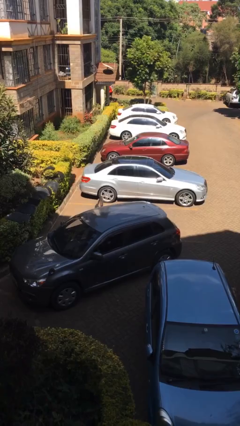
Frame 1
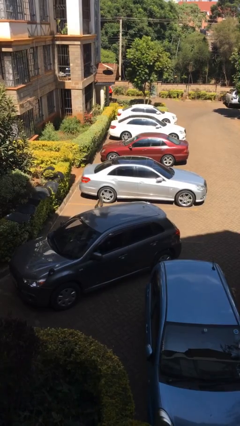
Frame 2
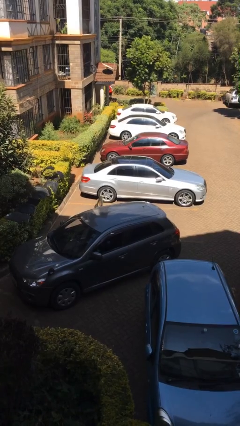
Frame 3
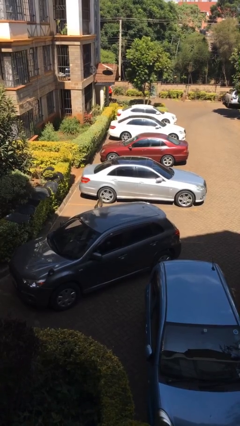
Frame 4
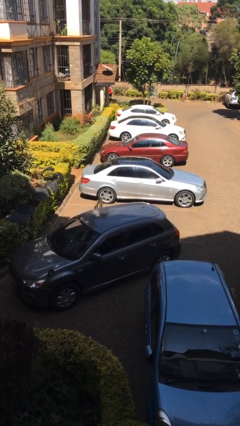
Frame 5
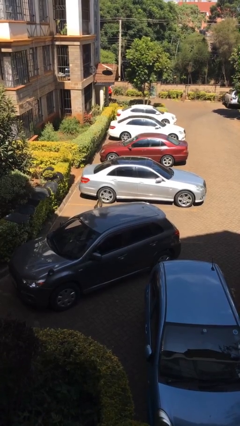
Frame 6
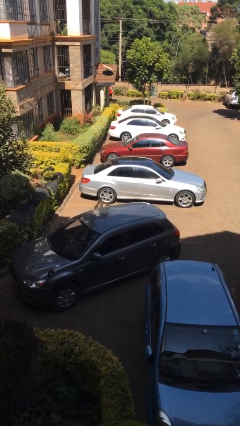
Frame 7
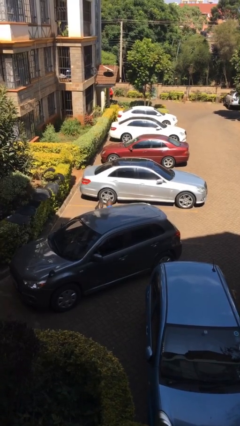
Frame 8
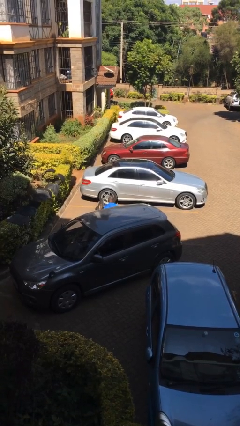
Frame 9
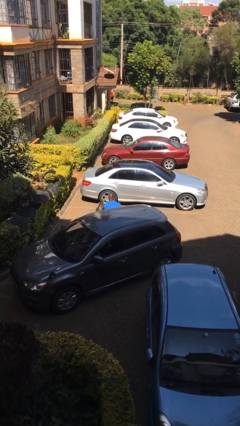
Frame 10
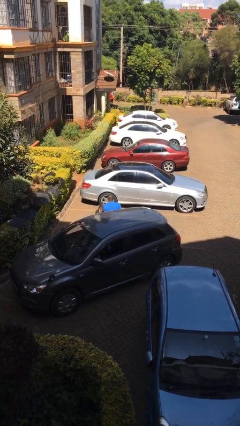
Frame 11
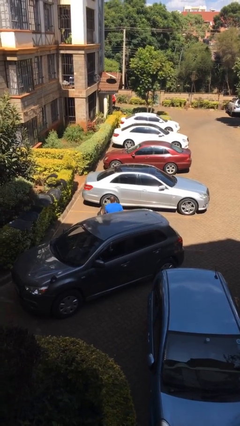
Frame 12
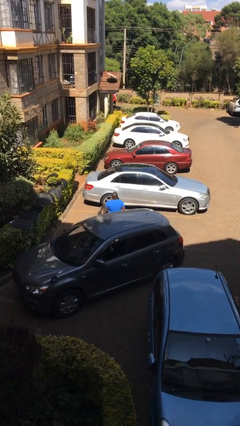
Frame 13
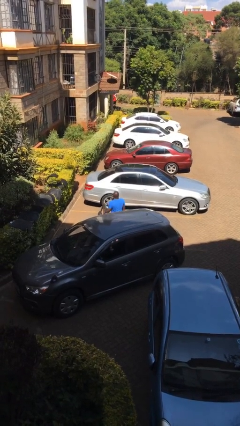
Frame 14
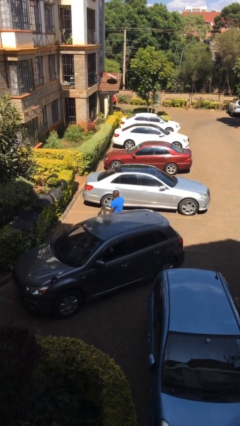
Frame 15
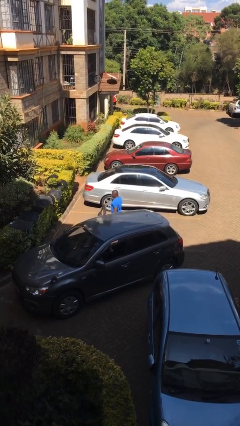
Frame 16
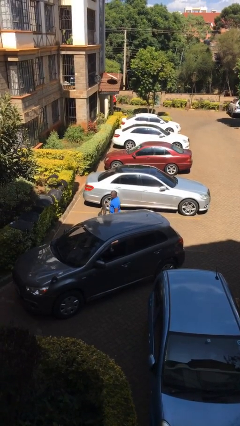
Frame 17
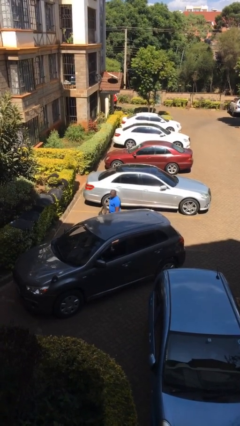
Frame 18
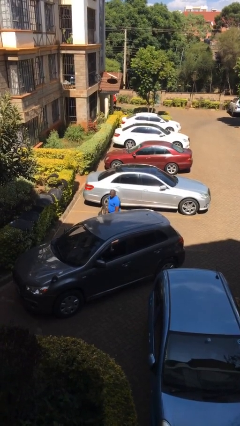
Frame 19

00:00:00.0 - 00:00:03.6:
person exits car

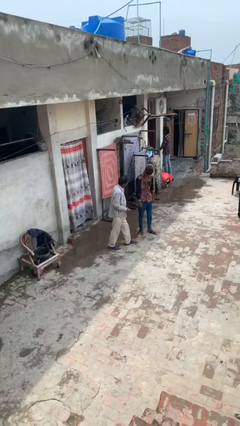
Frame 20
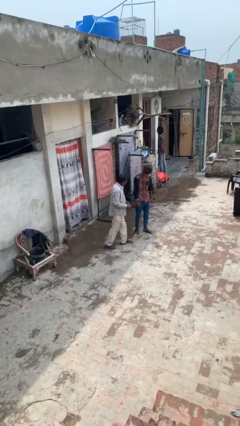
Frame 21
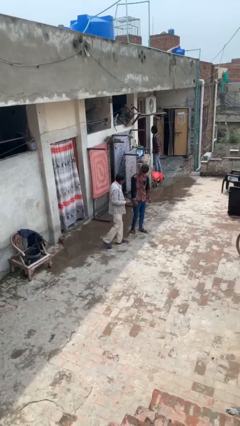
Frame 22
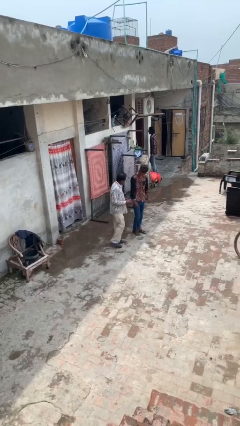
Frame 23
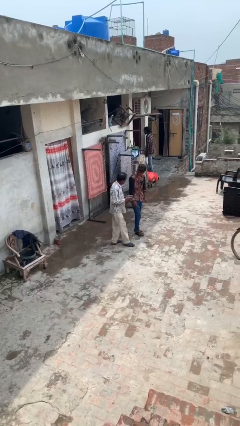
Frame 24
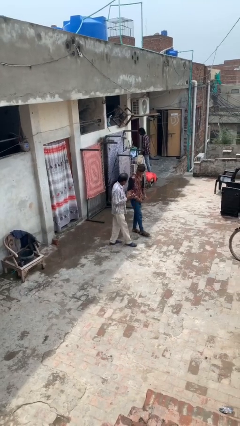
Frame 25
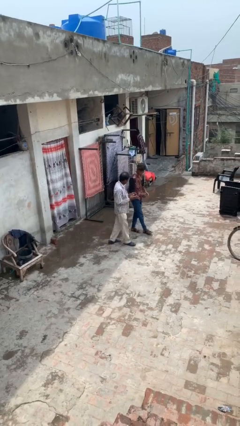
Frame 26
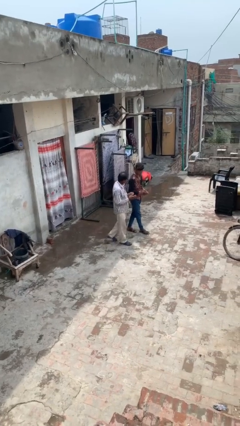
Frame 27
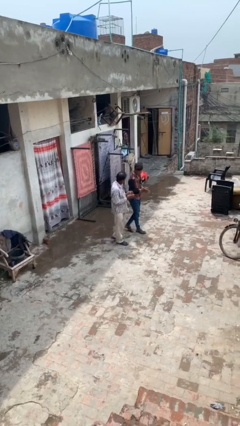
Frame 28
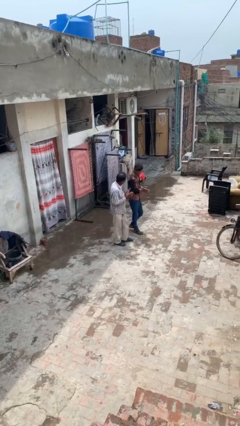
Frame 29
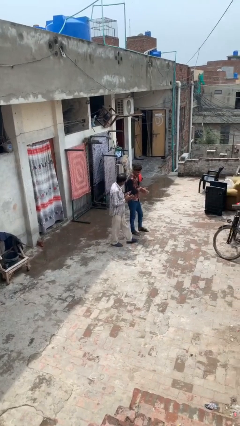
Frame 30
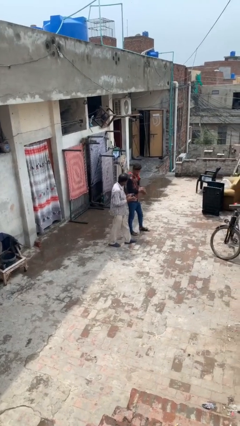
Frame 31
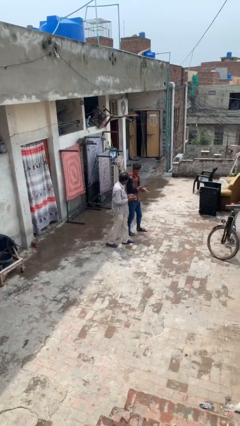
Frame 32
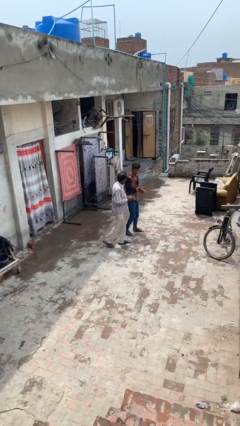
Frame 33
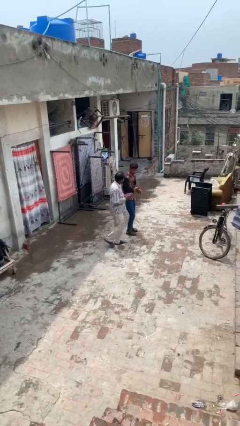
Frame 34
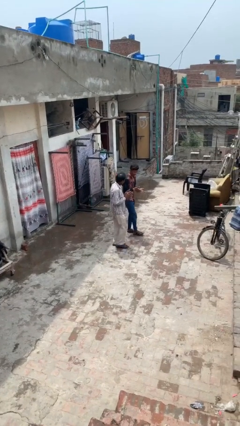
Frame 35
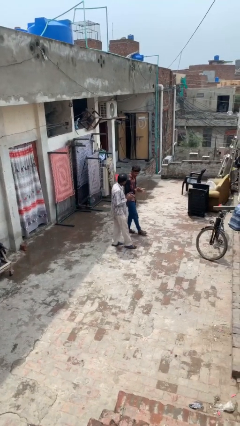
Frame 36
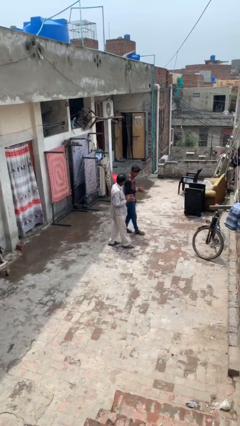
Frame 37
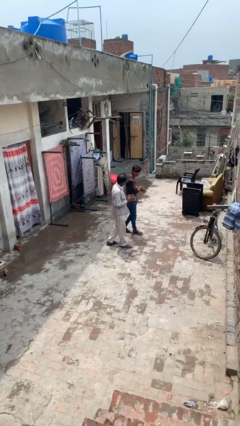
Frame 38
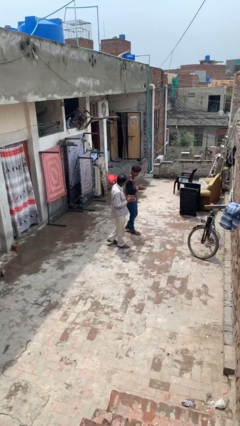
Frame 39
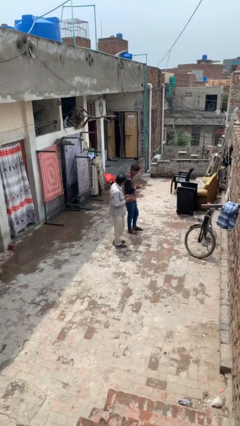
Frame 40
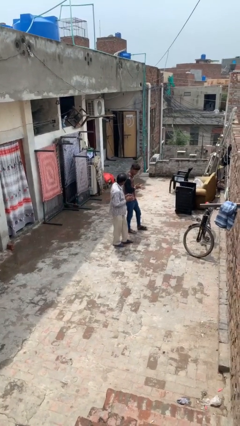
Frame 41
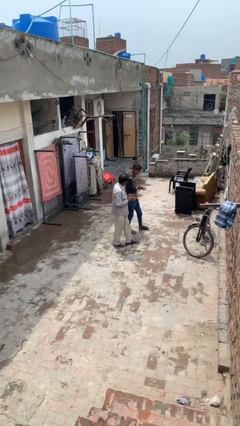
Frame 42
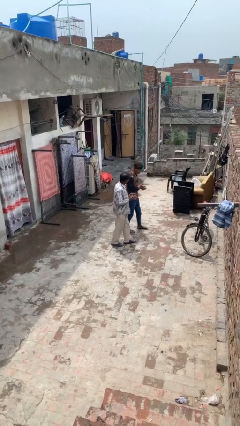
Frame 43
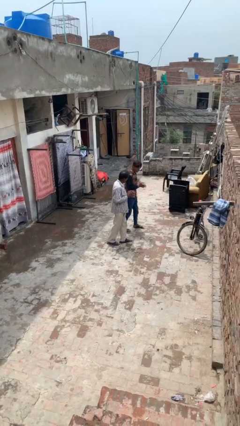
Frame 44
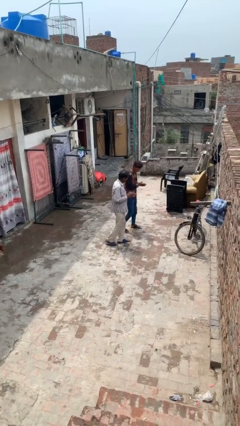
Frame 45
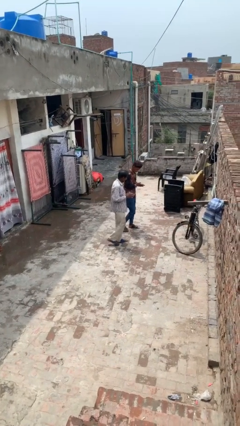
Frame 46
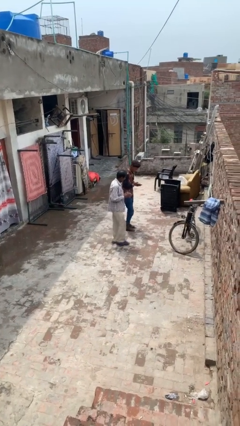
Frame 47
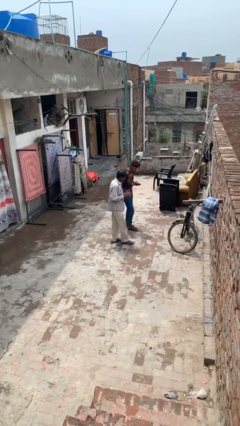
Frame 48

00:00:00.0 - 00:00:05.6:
person talks to person

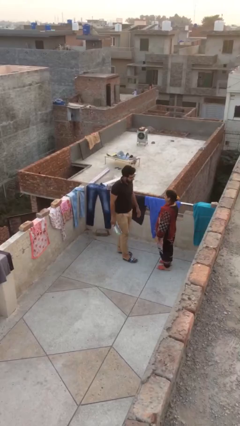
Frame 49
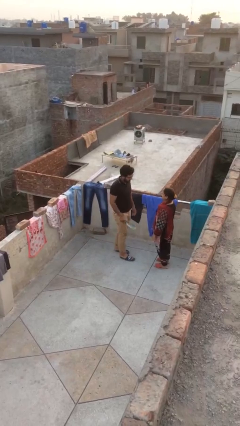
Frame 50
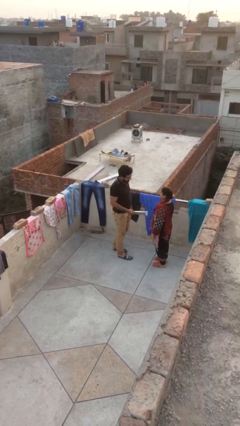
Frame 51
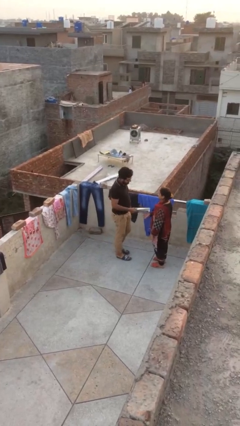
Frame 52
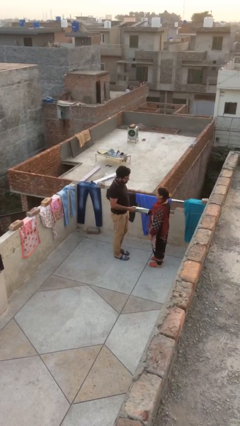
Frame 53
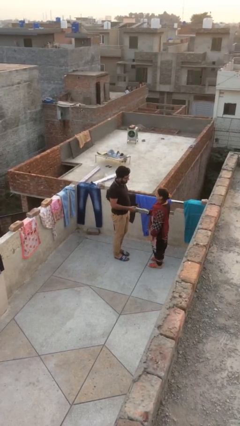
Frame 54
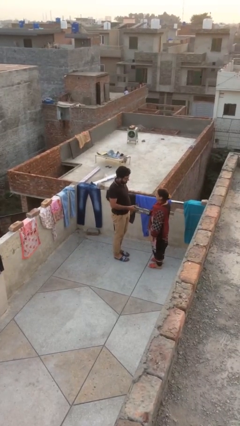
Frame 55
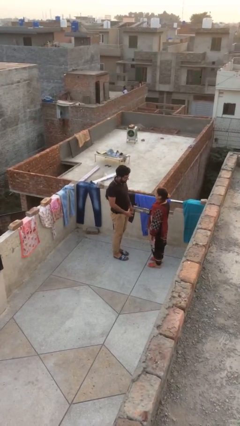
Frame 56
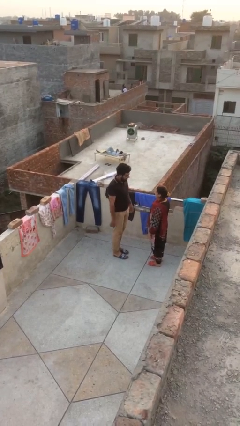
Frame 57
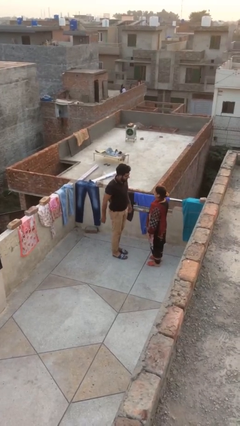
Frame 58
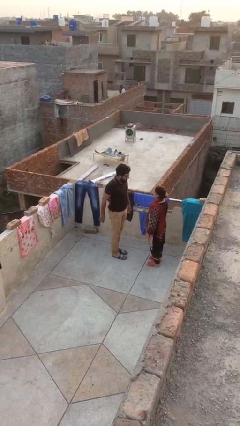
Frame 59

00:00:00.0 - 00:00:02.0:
person transfers object to person

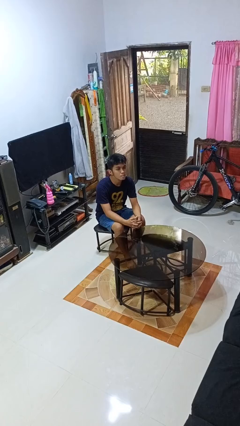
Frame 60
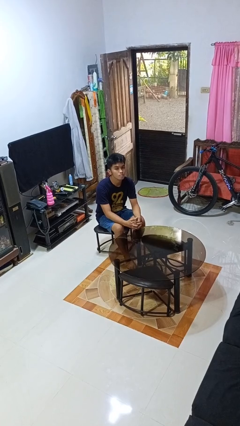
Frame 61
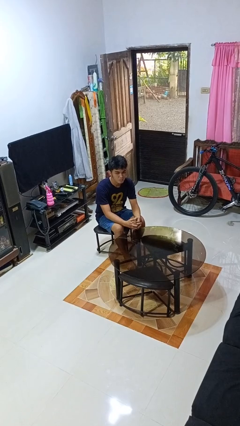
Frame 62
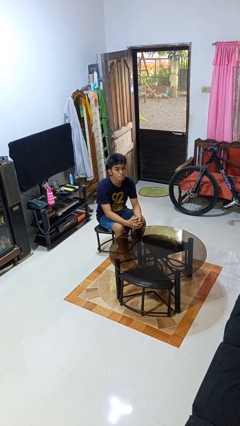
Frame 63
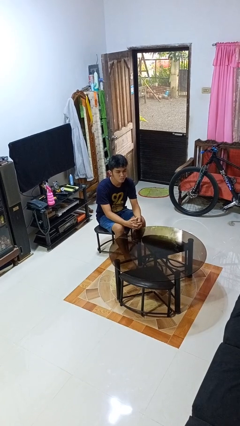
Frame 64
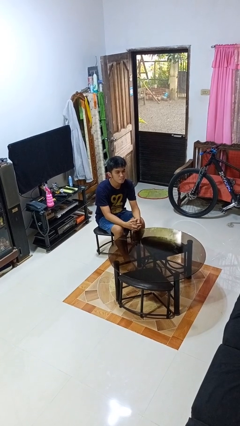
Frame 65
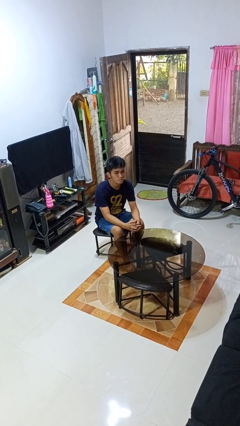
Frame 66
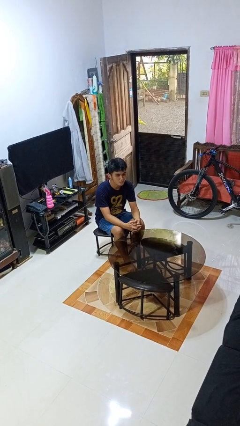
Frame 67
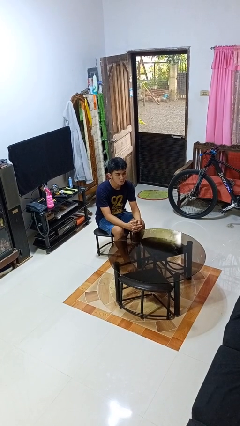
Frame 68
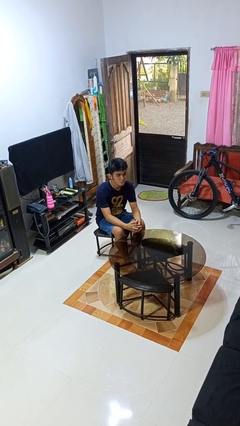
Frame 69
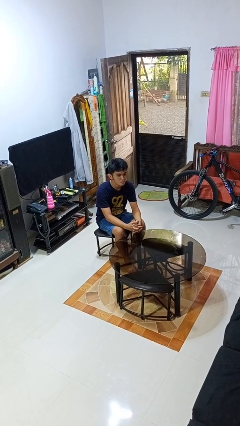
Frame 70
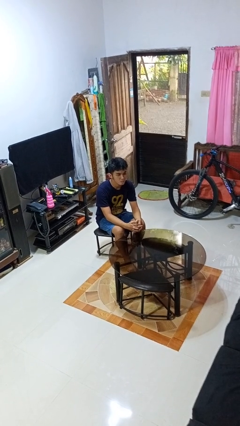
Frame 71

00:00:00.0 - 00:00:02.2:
person nods head

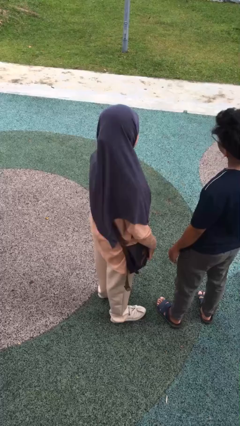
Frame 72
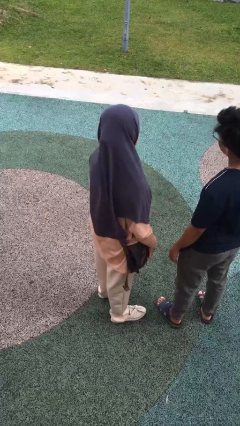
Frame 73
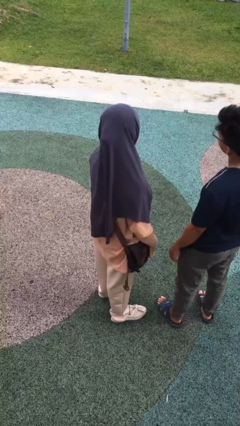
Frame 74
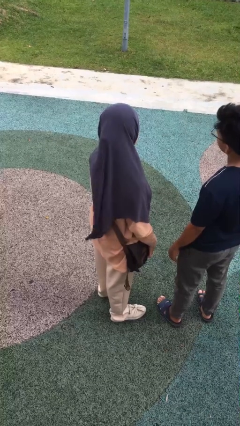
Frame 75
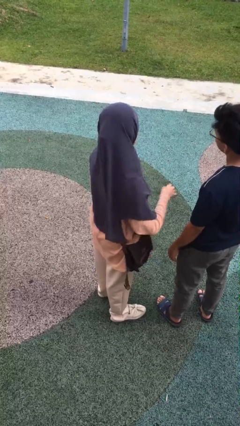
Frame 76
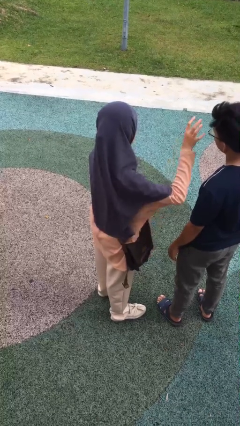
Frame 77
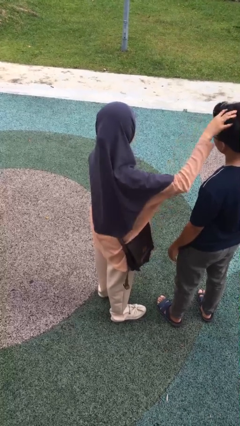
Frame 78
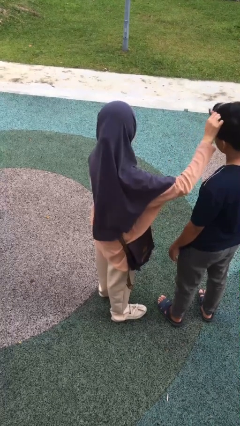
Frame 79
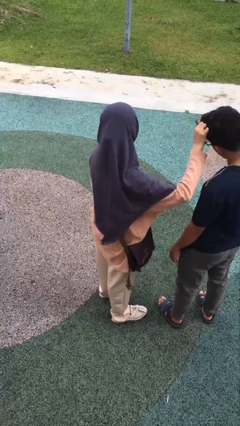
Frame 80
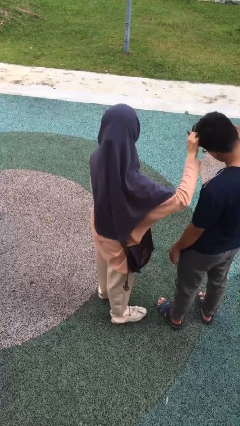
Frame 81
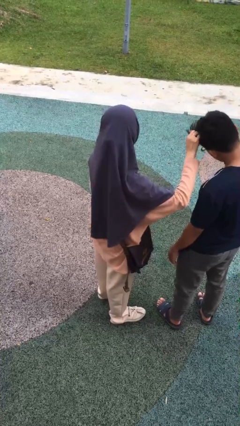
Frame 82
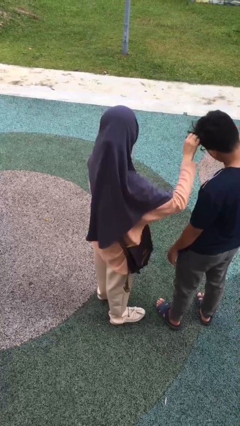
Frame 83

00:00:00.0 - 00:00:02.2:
person grabs person by hair

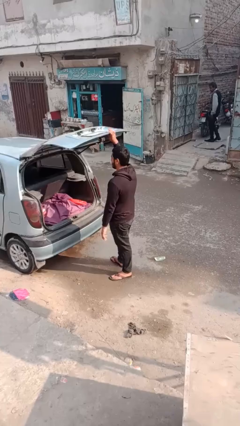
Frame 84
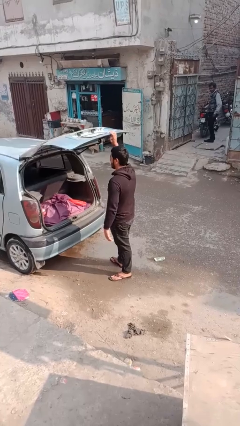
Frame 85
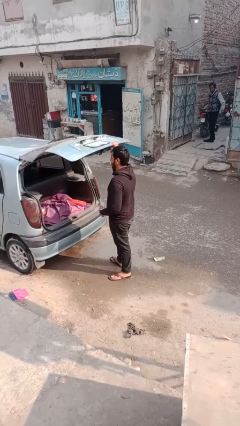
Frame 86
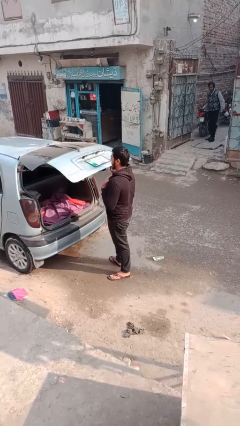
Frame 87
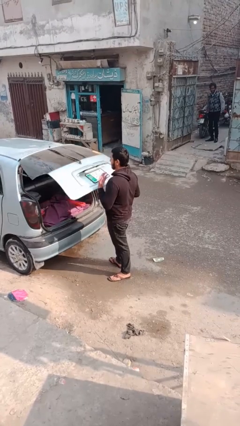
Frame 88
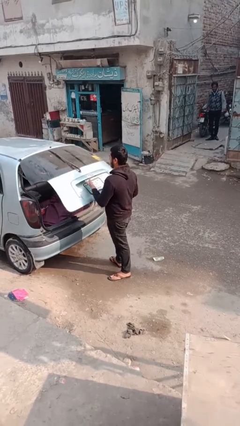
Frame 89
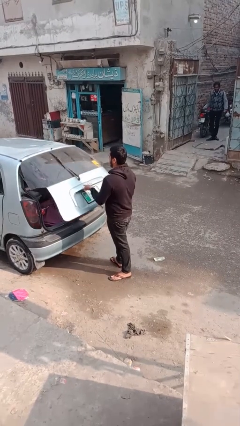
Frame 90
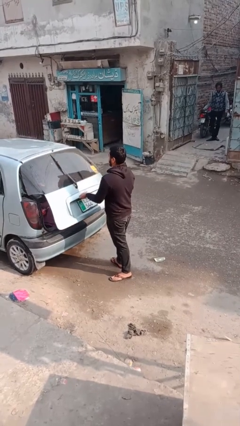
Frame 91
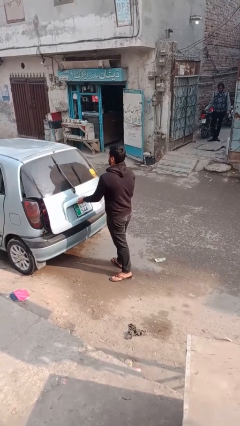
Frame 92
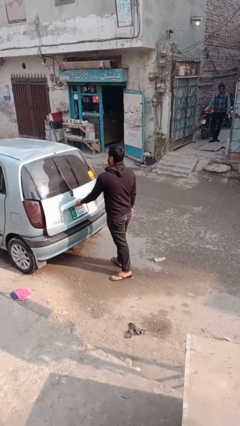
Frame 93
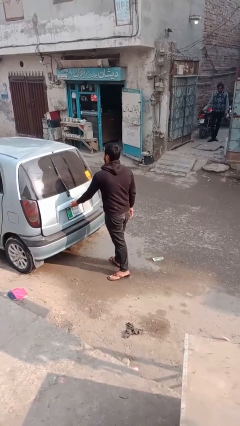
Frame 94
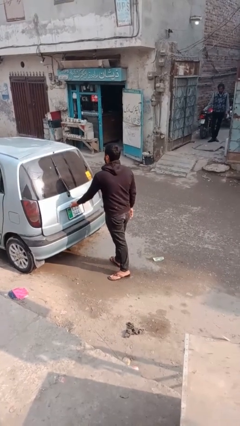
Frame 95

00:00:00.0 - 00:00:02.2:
person closes car trunk
